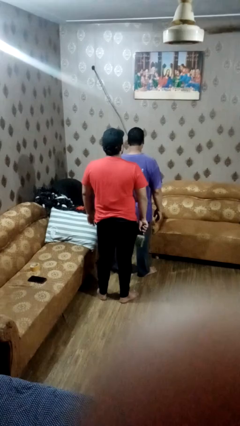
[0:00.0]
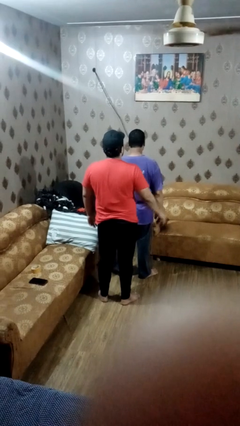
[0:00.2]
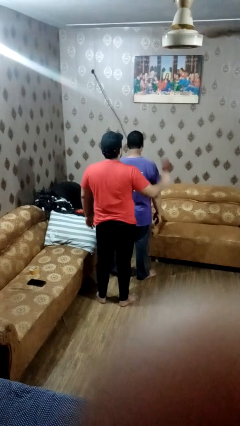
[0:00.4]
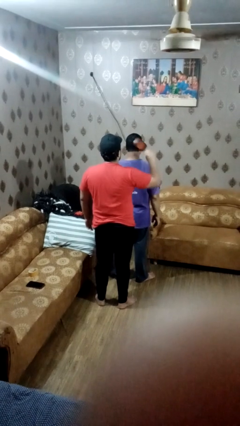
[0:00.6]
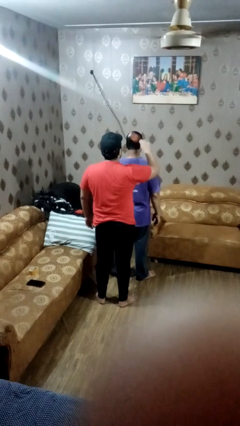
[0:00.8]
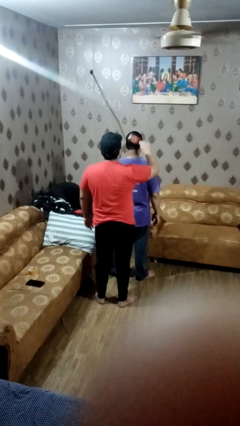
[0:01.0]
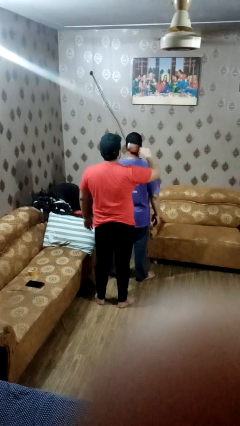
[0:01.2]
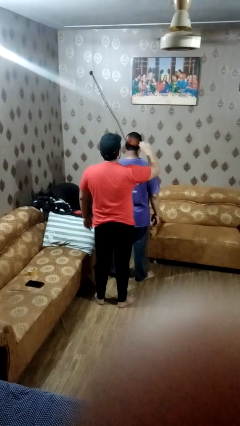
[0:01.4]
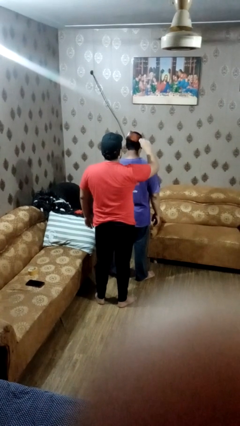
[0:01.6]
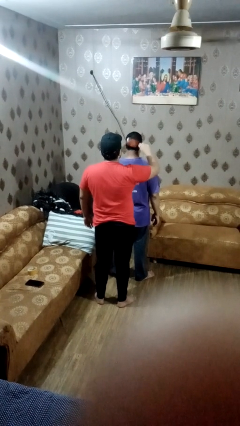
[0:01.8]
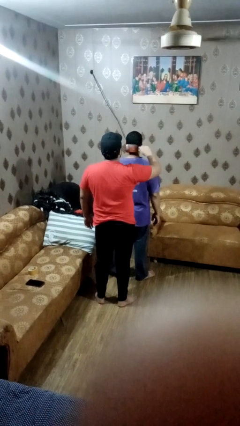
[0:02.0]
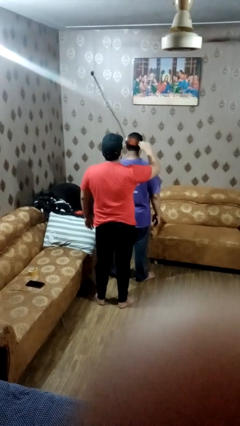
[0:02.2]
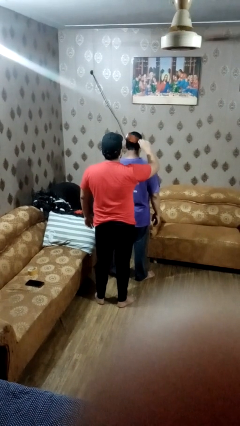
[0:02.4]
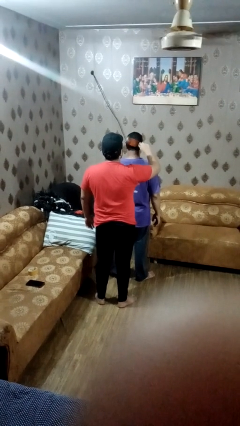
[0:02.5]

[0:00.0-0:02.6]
person brushes hair of person

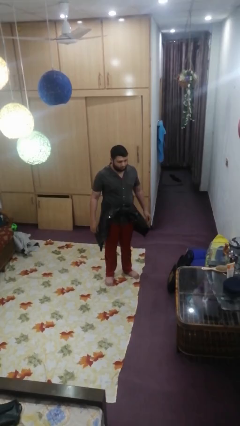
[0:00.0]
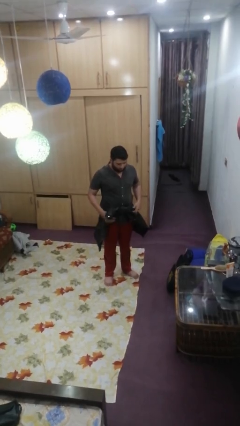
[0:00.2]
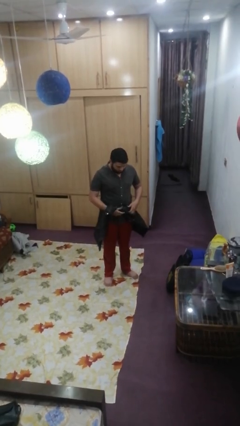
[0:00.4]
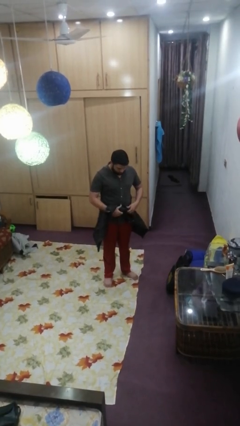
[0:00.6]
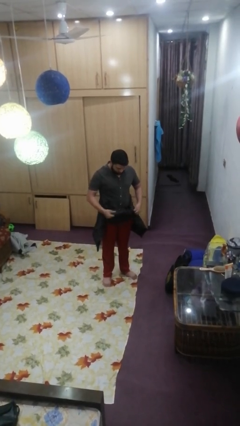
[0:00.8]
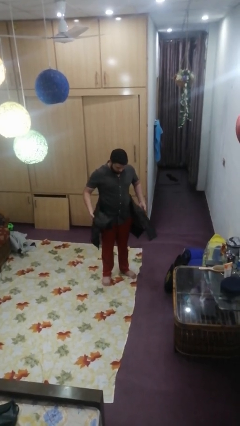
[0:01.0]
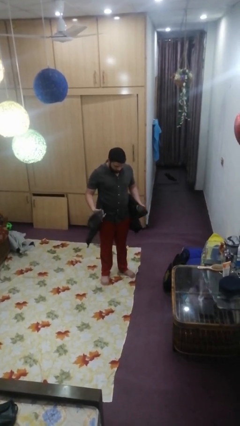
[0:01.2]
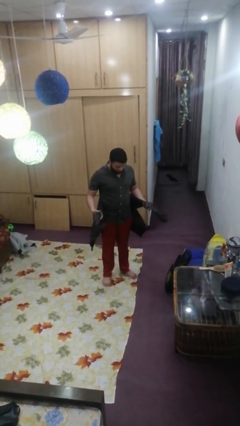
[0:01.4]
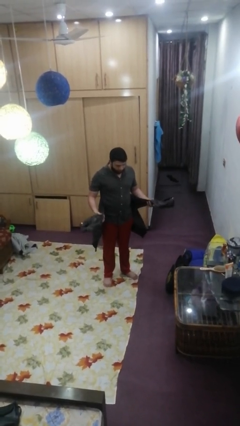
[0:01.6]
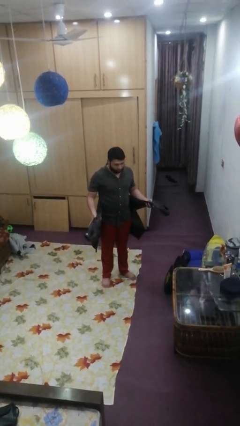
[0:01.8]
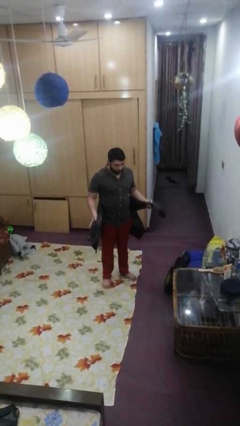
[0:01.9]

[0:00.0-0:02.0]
person unties jacket around waist

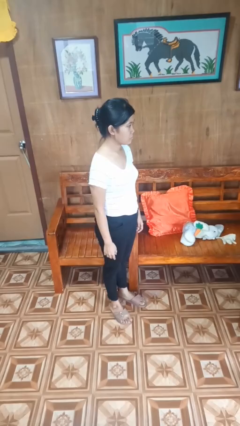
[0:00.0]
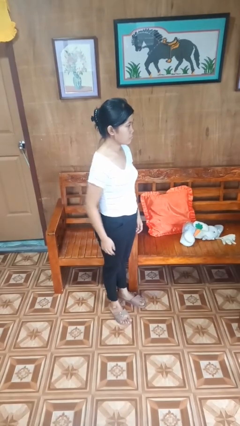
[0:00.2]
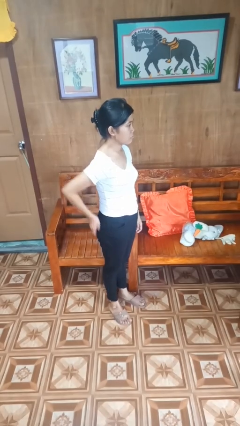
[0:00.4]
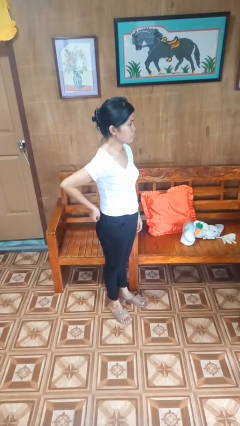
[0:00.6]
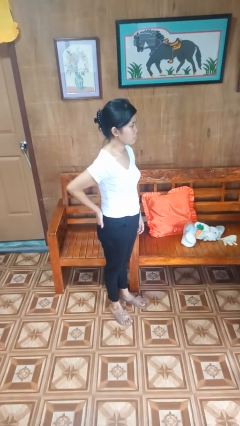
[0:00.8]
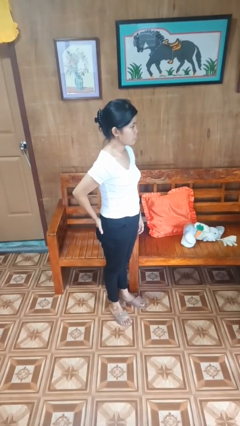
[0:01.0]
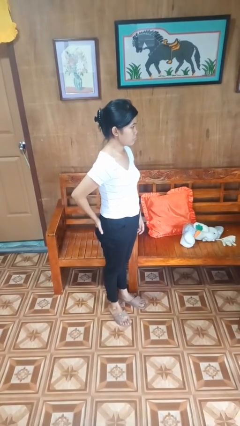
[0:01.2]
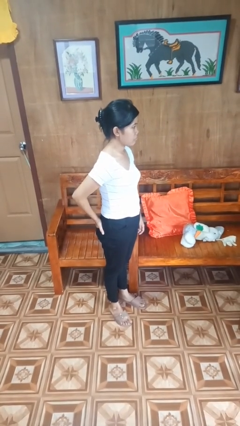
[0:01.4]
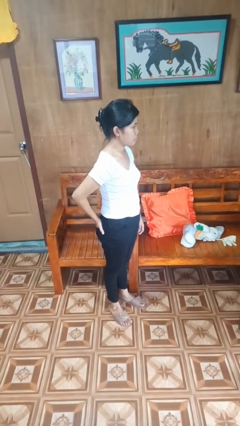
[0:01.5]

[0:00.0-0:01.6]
person puts hands in back pockets

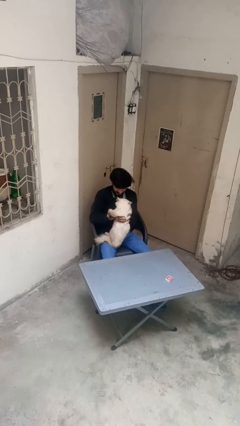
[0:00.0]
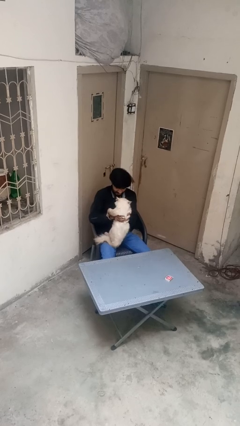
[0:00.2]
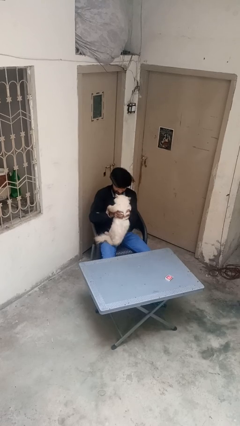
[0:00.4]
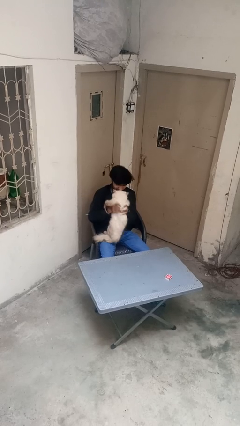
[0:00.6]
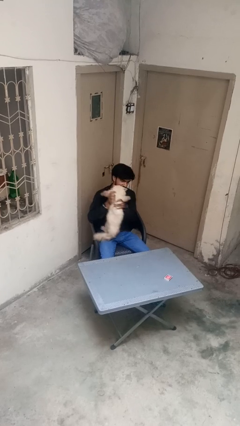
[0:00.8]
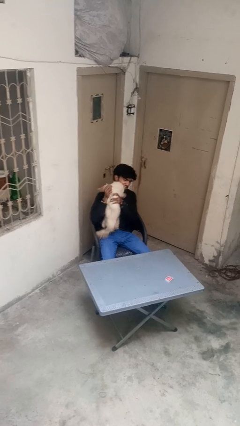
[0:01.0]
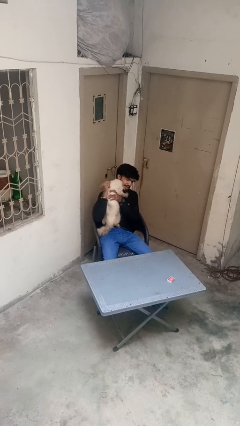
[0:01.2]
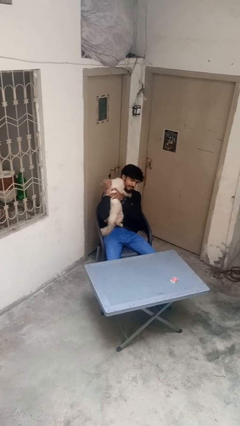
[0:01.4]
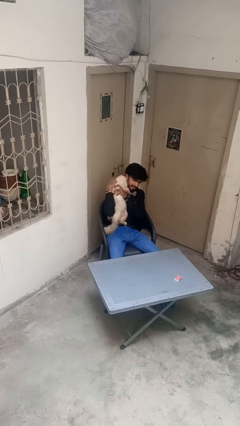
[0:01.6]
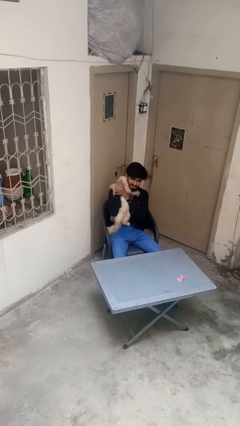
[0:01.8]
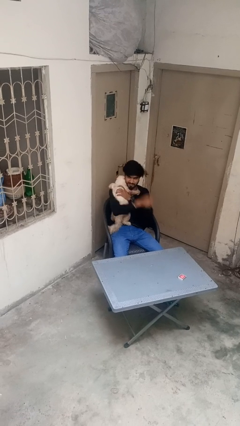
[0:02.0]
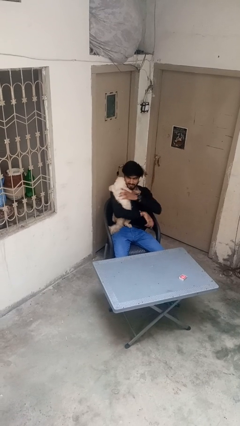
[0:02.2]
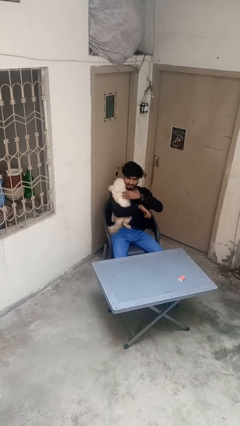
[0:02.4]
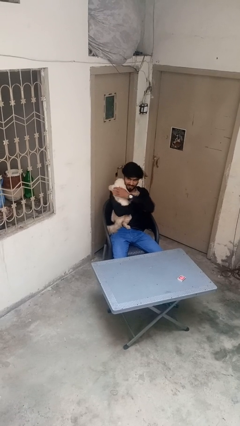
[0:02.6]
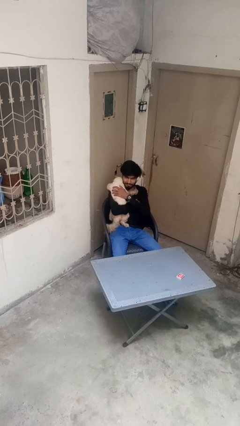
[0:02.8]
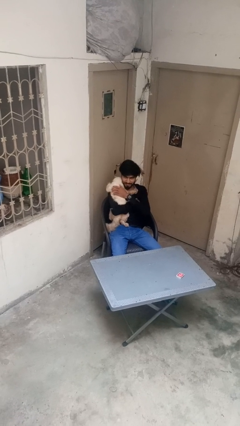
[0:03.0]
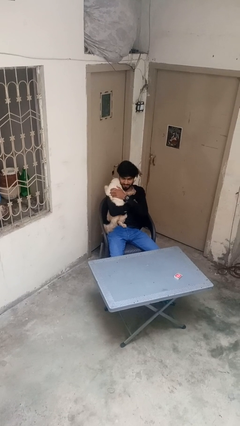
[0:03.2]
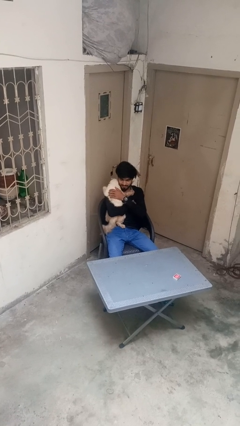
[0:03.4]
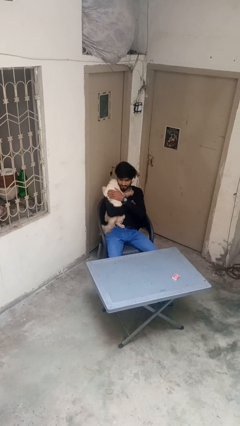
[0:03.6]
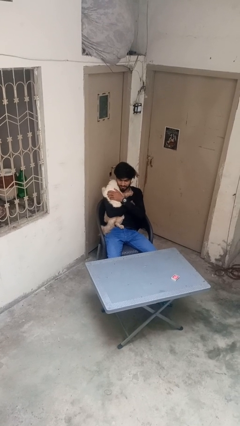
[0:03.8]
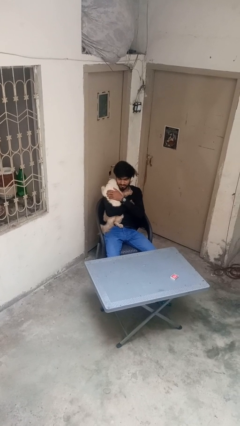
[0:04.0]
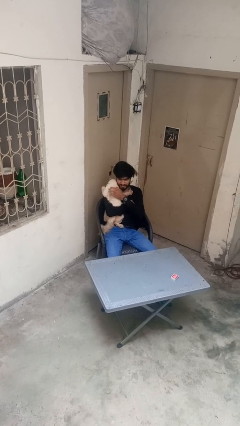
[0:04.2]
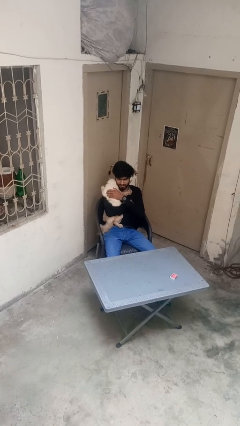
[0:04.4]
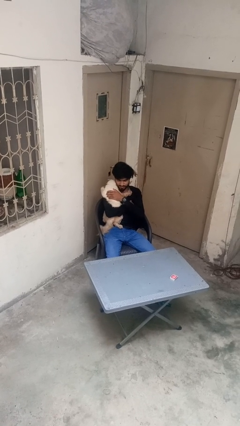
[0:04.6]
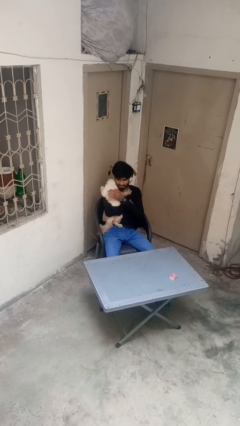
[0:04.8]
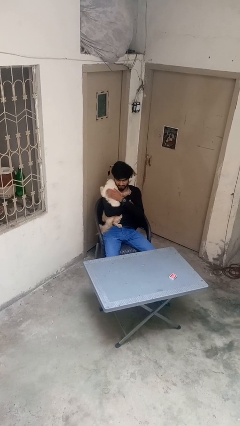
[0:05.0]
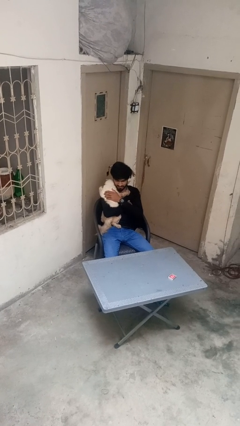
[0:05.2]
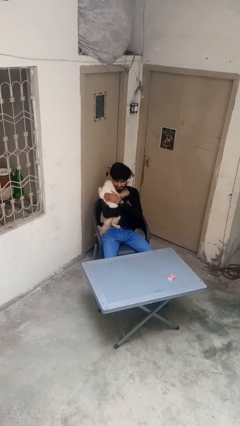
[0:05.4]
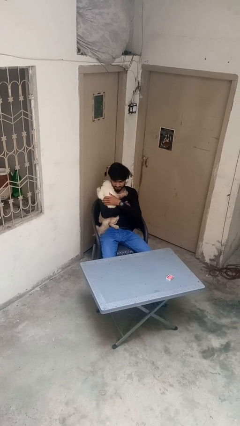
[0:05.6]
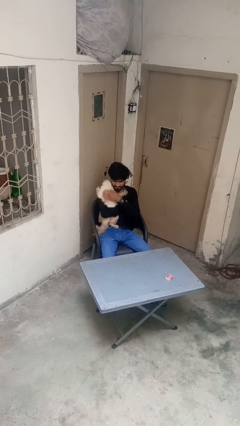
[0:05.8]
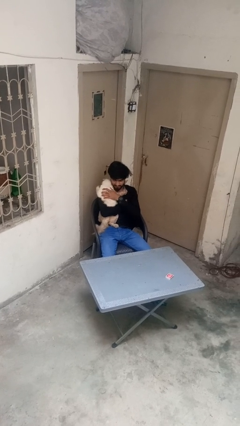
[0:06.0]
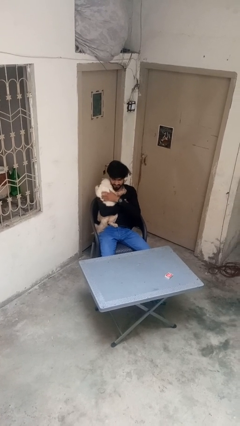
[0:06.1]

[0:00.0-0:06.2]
person hugs cat

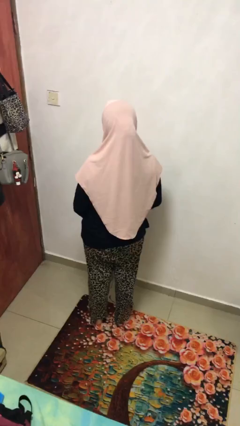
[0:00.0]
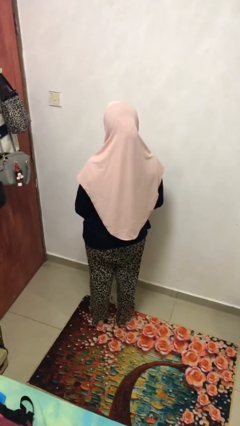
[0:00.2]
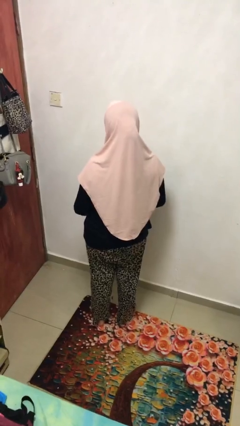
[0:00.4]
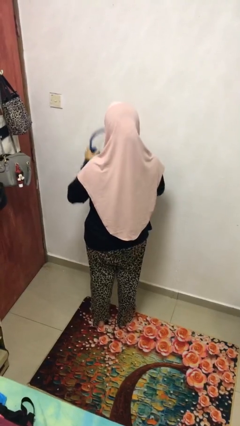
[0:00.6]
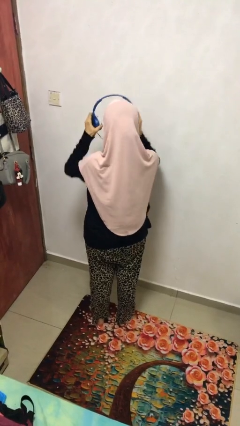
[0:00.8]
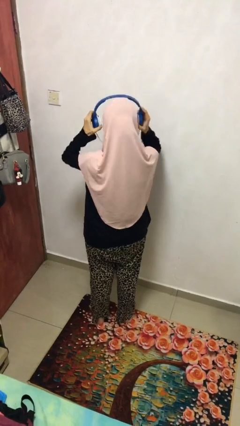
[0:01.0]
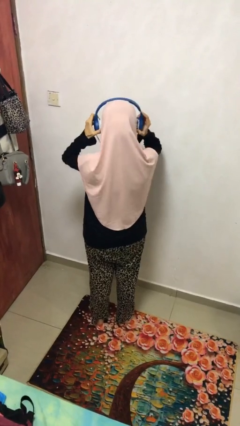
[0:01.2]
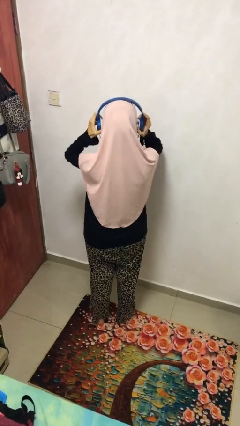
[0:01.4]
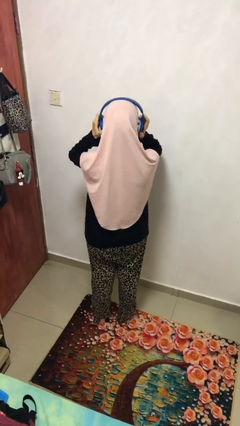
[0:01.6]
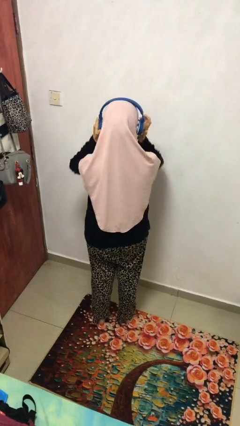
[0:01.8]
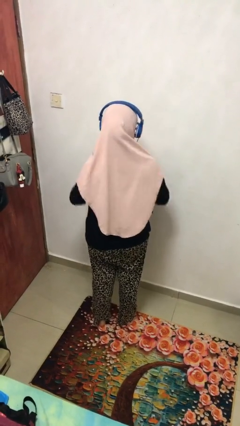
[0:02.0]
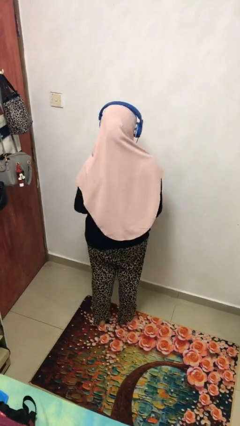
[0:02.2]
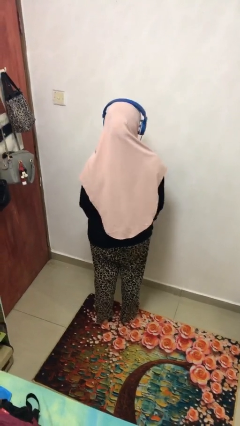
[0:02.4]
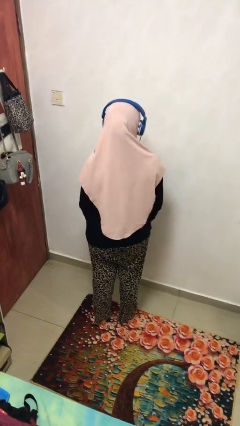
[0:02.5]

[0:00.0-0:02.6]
person puts on headphones

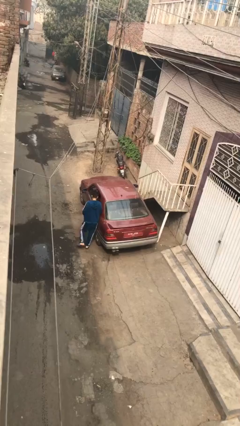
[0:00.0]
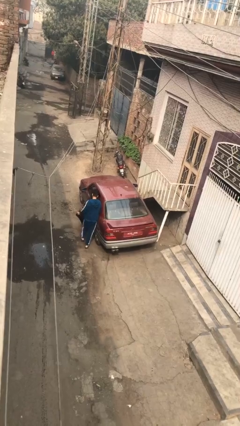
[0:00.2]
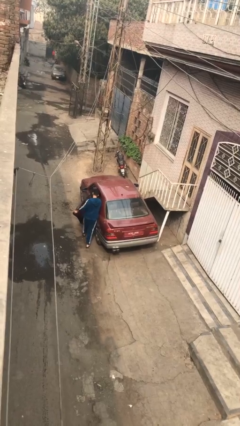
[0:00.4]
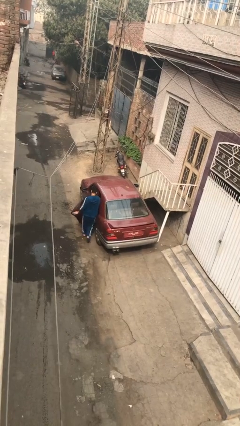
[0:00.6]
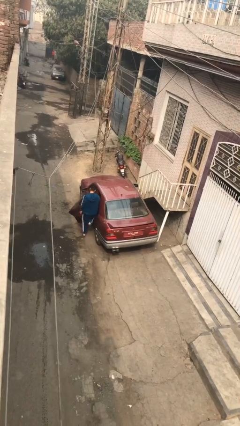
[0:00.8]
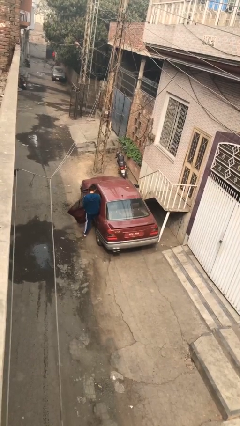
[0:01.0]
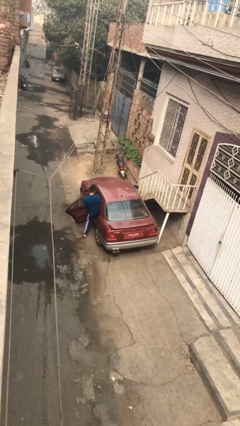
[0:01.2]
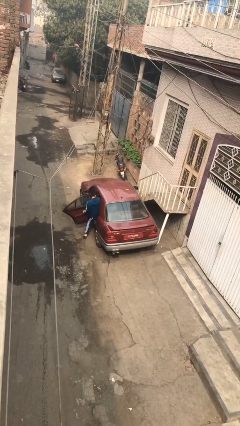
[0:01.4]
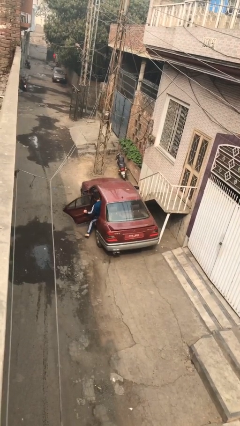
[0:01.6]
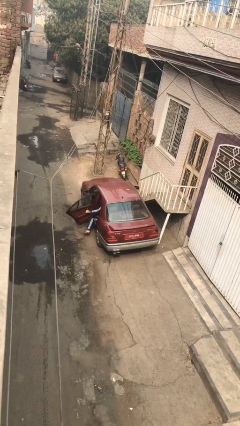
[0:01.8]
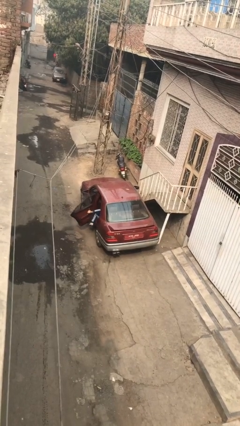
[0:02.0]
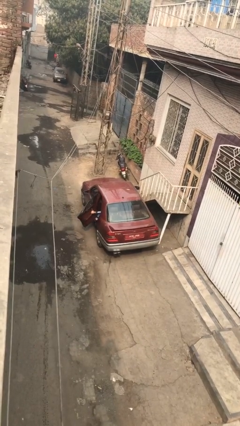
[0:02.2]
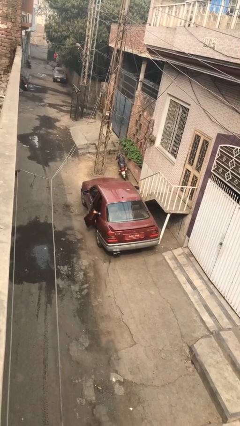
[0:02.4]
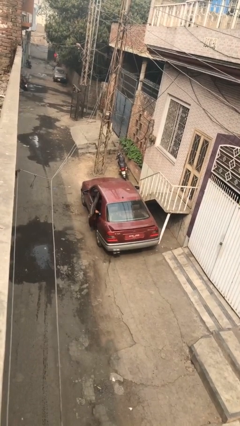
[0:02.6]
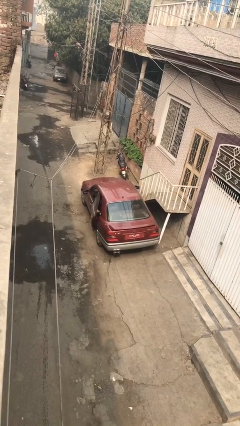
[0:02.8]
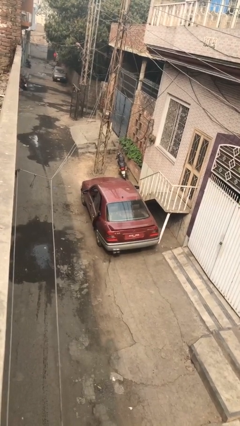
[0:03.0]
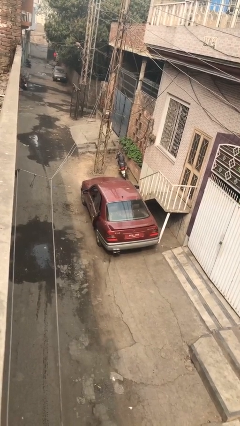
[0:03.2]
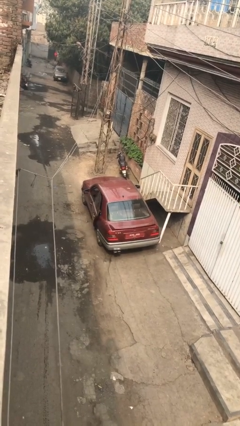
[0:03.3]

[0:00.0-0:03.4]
car picks up person
